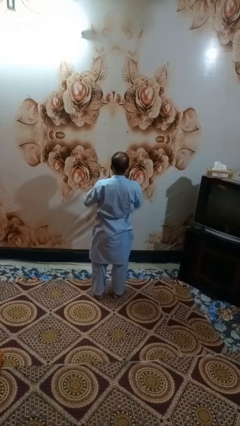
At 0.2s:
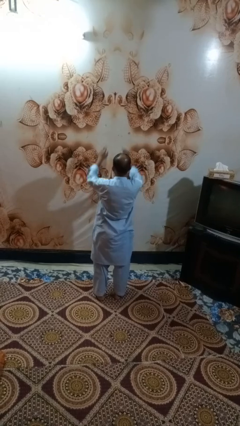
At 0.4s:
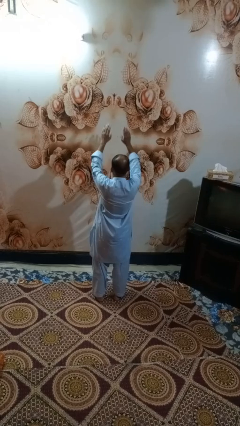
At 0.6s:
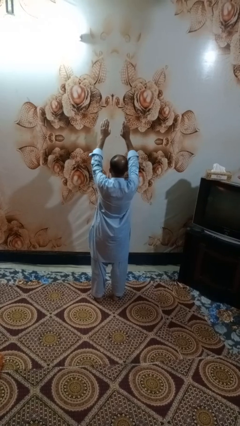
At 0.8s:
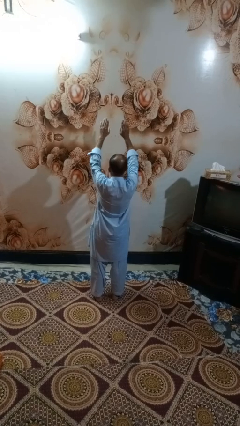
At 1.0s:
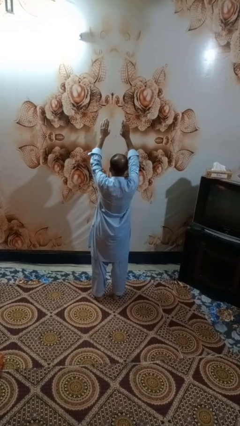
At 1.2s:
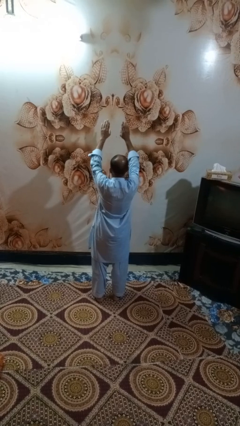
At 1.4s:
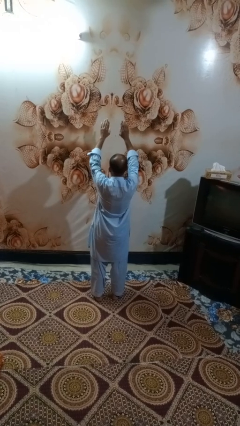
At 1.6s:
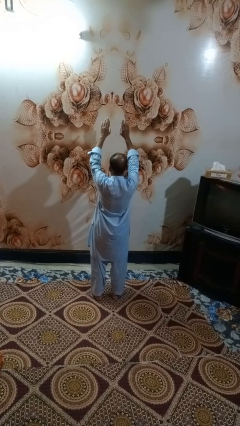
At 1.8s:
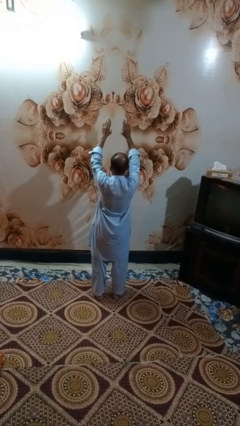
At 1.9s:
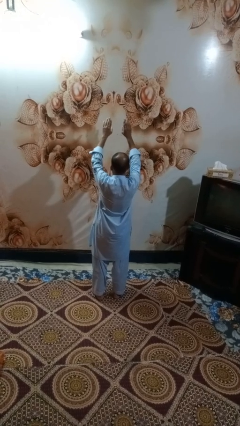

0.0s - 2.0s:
person gestures swipe up

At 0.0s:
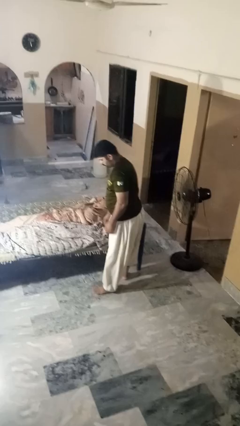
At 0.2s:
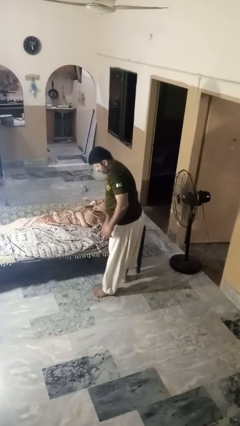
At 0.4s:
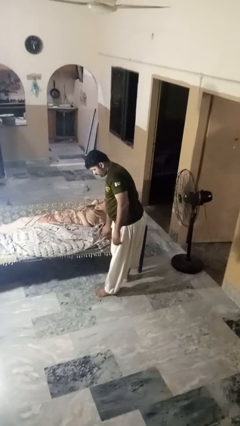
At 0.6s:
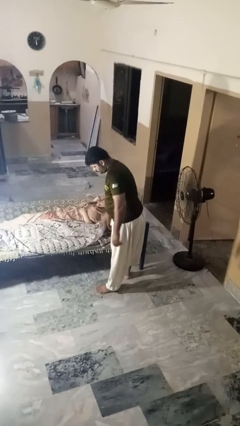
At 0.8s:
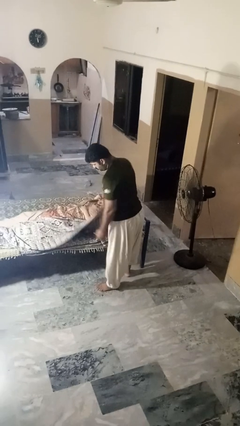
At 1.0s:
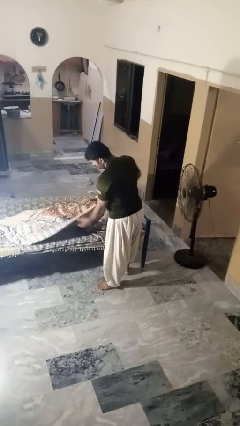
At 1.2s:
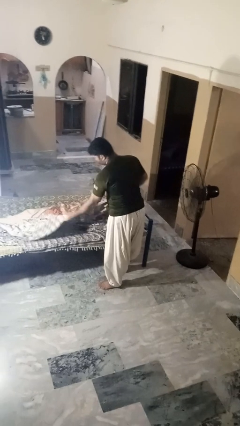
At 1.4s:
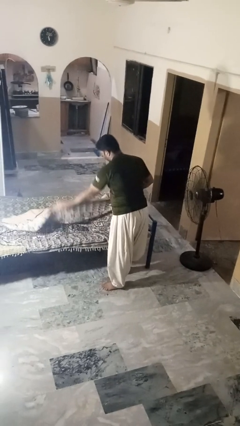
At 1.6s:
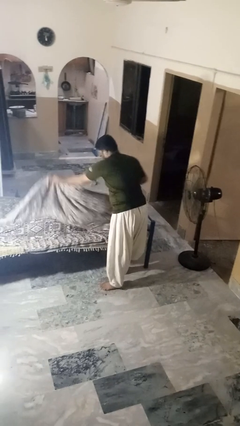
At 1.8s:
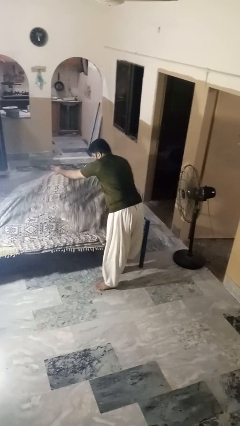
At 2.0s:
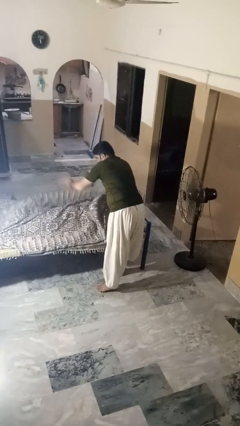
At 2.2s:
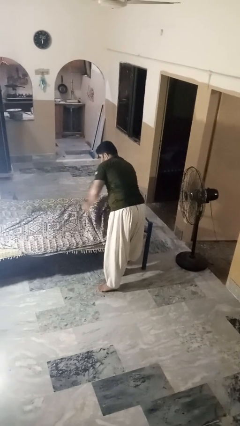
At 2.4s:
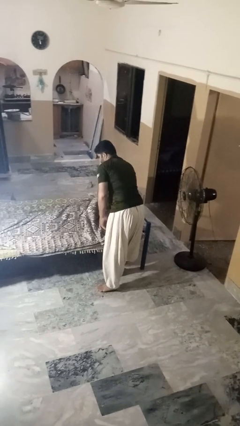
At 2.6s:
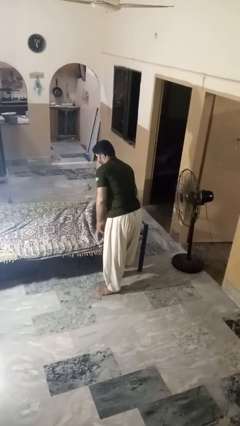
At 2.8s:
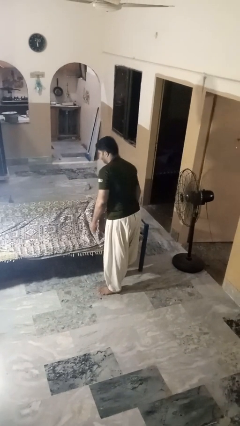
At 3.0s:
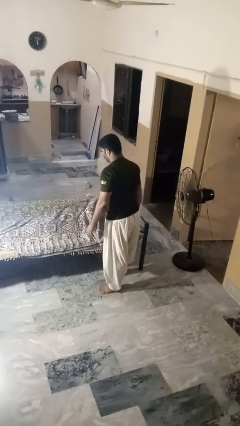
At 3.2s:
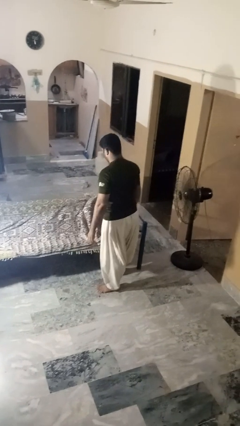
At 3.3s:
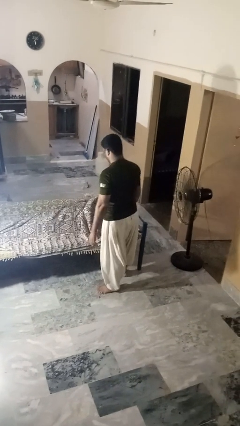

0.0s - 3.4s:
person covers friend with blanket

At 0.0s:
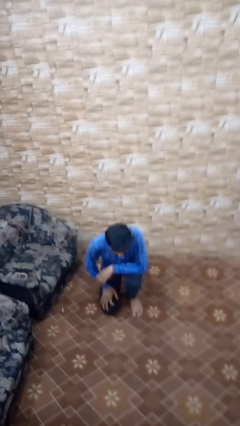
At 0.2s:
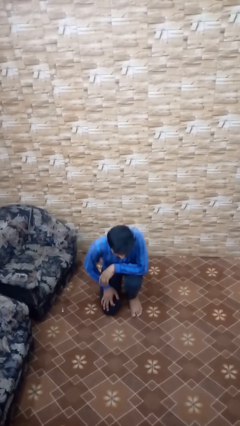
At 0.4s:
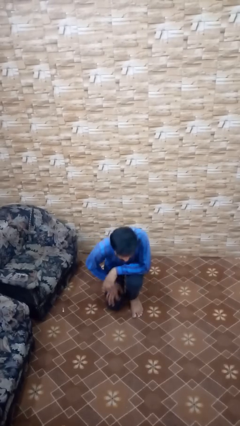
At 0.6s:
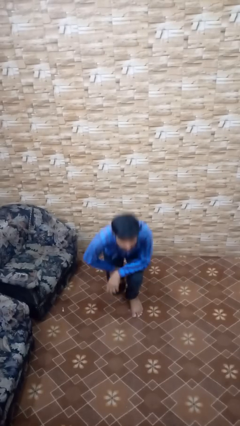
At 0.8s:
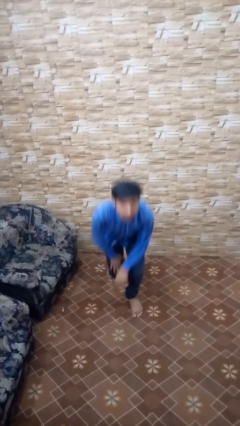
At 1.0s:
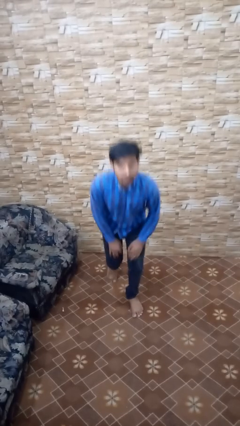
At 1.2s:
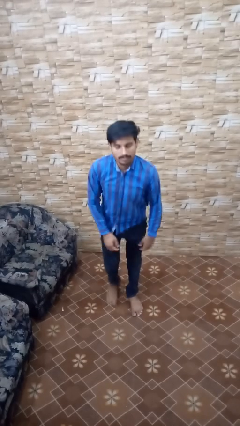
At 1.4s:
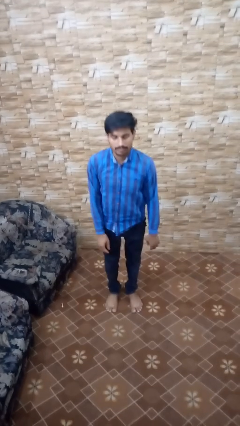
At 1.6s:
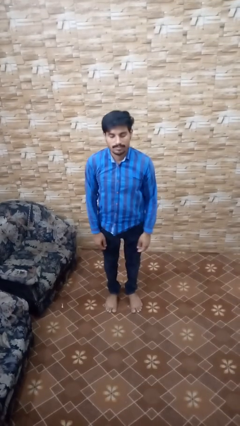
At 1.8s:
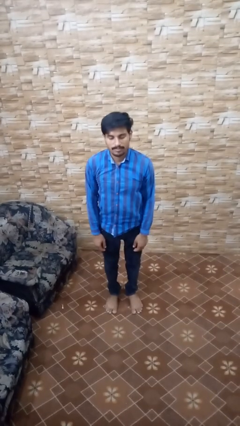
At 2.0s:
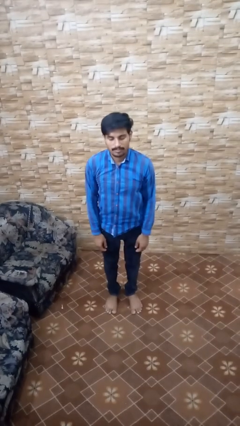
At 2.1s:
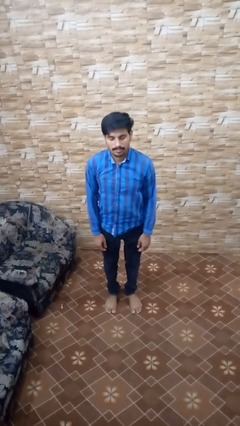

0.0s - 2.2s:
person stands up from floor

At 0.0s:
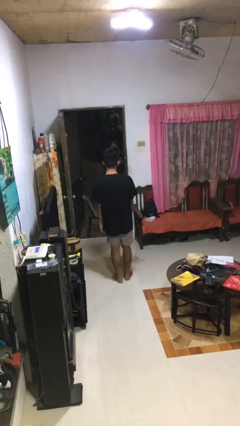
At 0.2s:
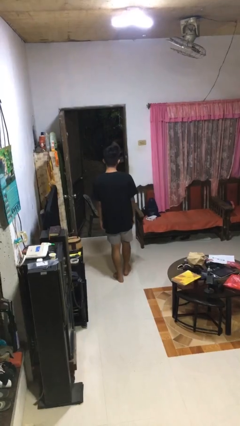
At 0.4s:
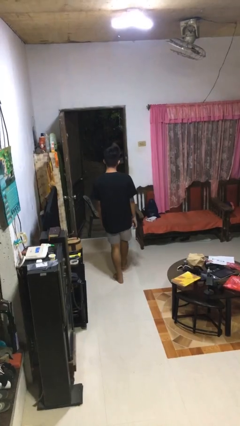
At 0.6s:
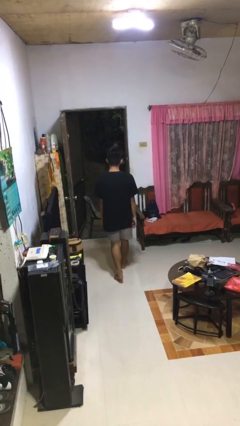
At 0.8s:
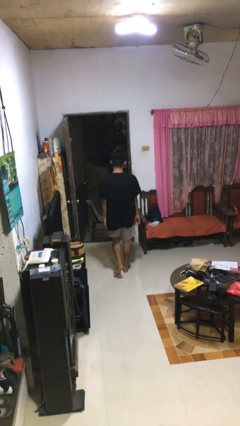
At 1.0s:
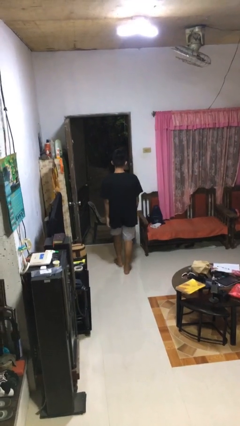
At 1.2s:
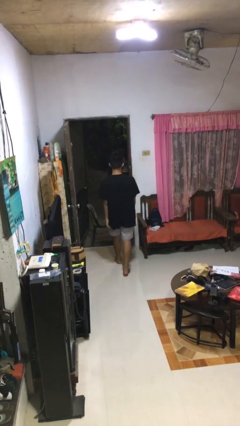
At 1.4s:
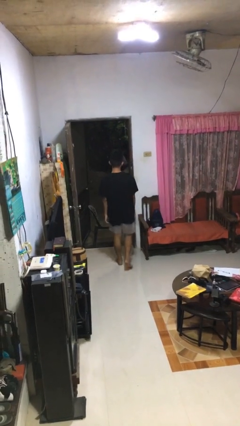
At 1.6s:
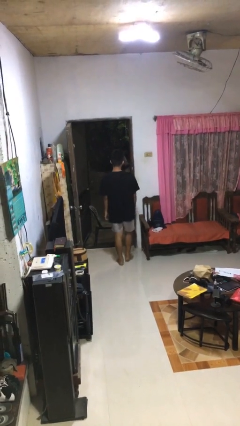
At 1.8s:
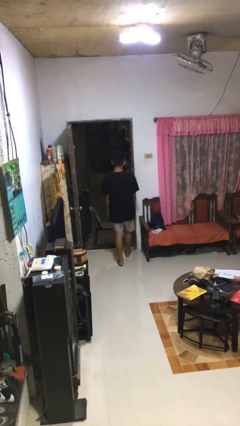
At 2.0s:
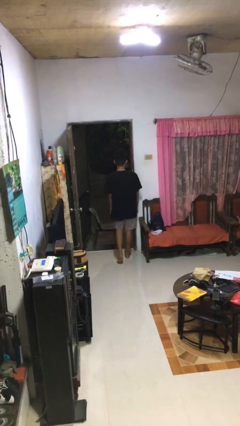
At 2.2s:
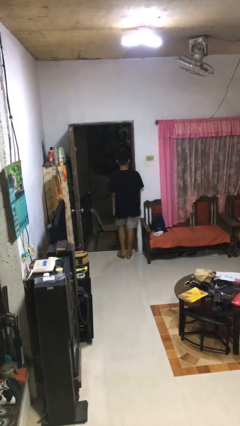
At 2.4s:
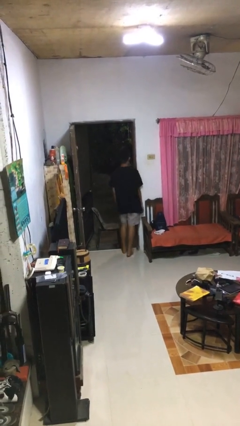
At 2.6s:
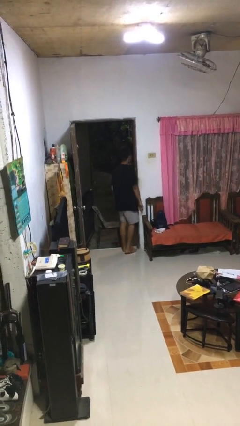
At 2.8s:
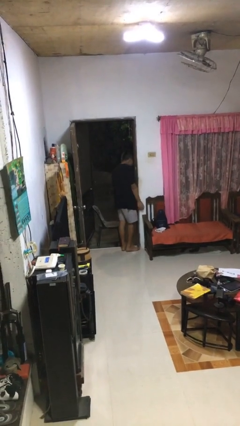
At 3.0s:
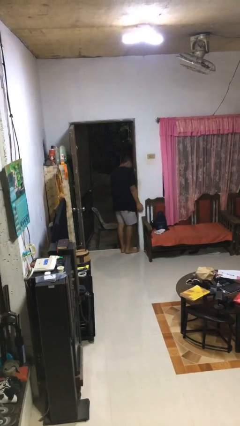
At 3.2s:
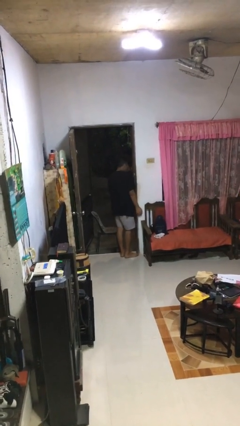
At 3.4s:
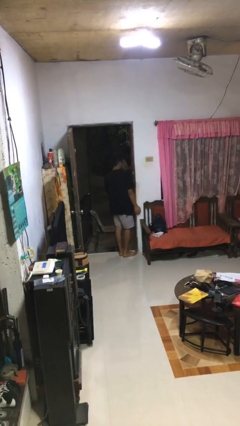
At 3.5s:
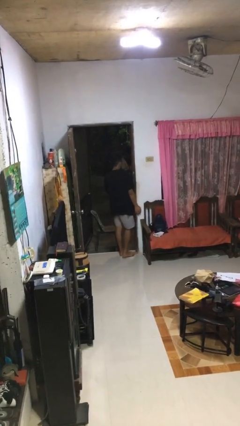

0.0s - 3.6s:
person bumps into wall

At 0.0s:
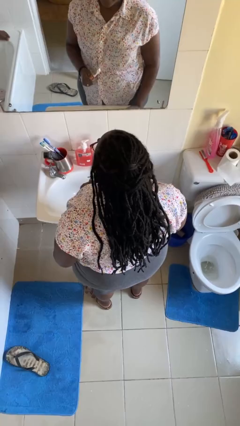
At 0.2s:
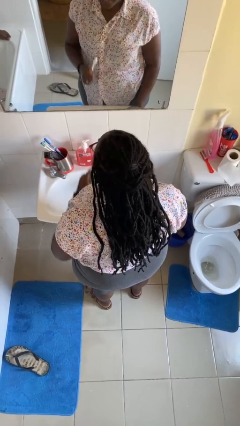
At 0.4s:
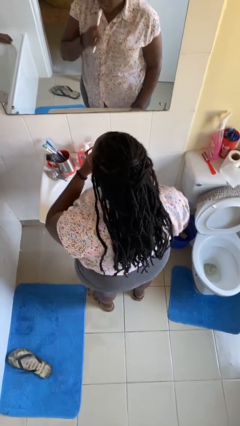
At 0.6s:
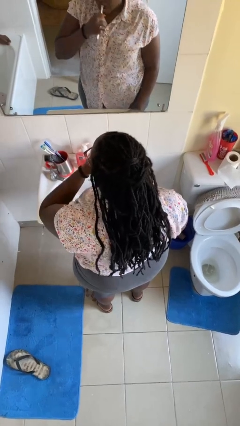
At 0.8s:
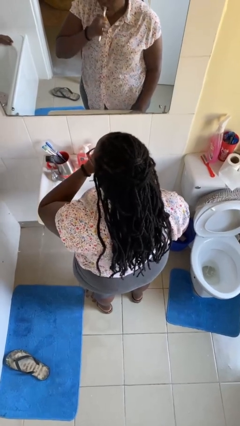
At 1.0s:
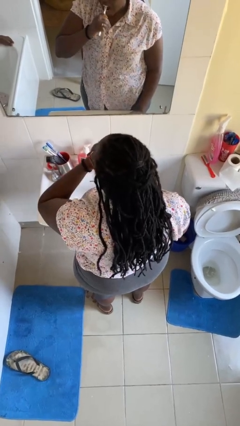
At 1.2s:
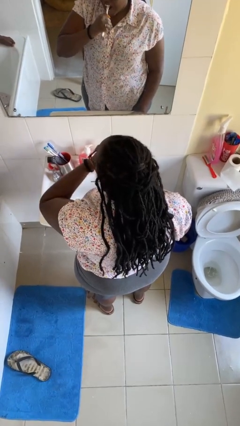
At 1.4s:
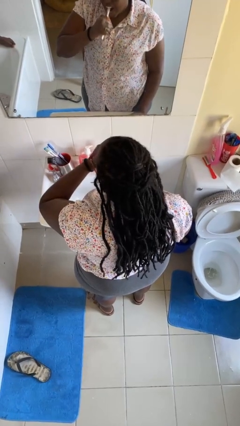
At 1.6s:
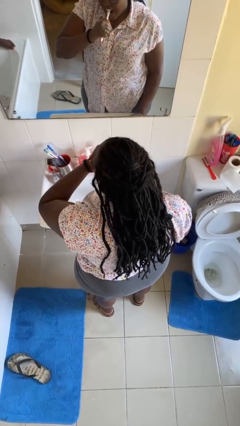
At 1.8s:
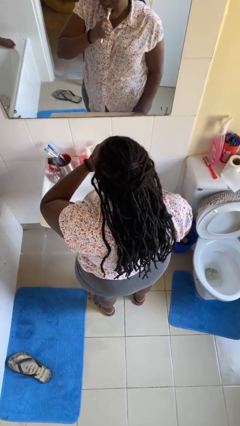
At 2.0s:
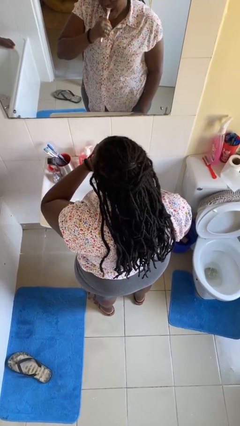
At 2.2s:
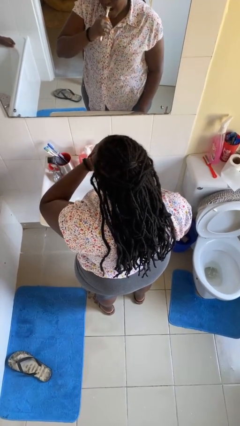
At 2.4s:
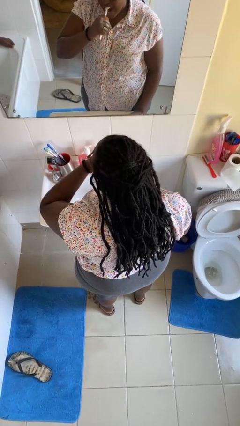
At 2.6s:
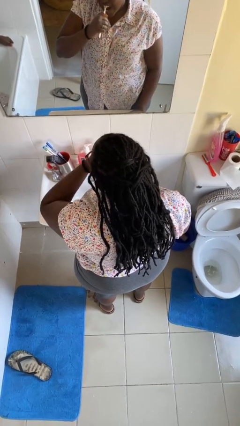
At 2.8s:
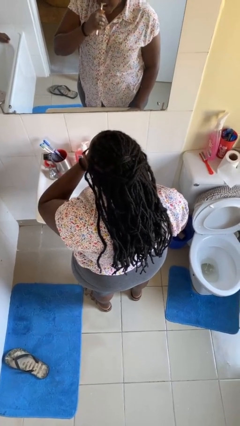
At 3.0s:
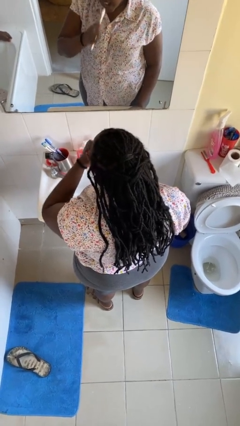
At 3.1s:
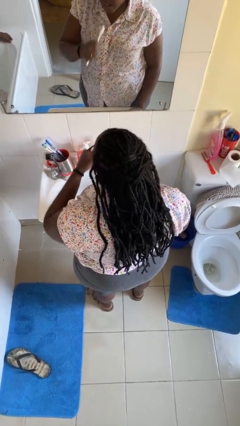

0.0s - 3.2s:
person brushes teeth

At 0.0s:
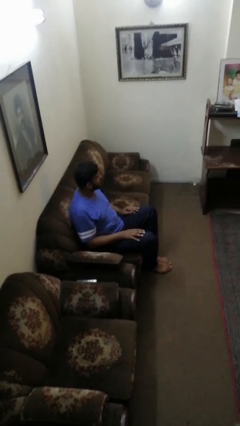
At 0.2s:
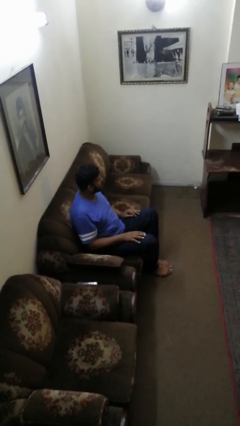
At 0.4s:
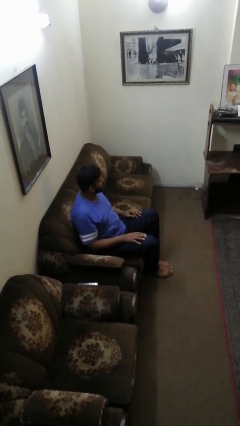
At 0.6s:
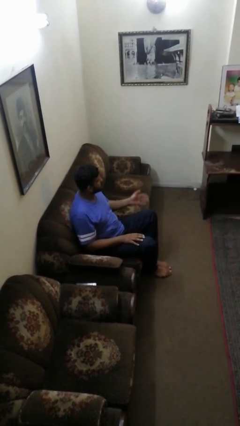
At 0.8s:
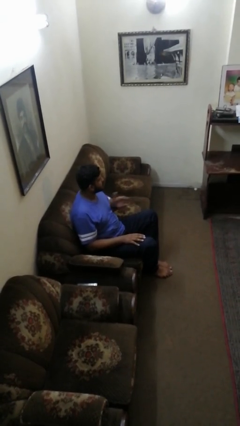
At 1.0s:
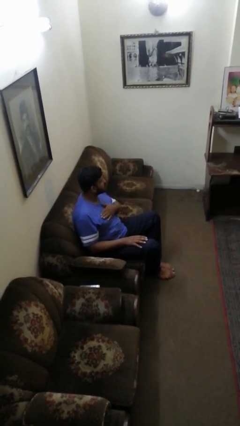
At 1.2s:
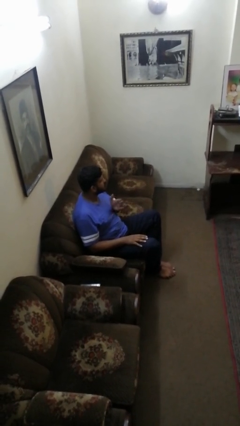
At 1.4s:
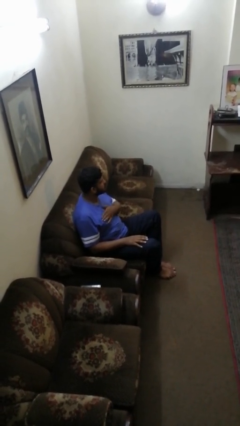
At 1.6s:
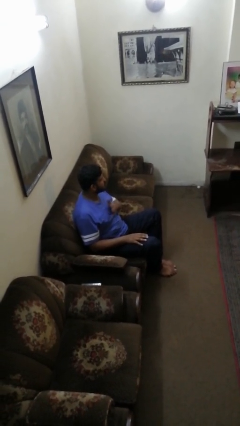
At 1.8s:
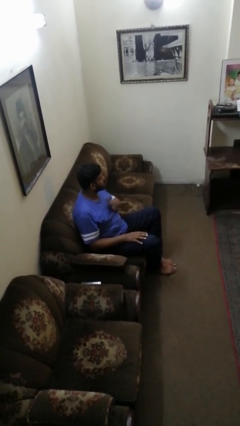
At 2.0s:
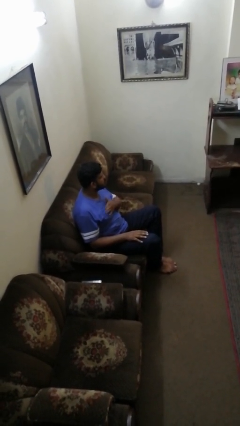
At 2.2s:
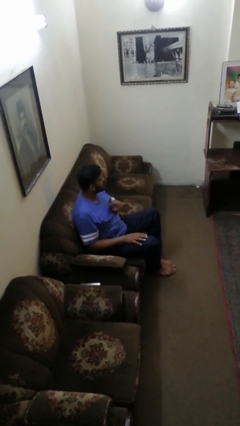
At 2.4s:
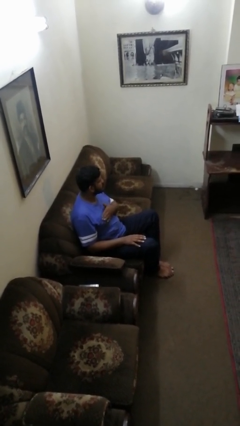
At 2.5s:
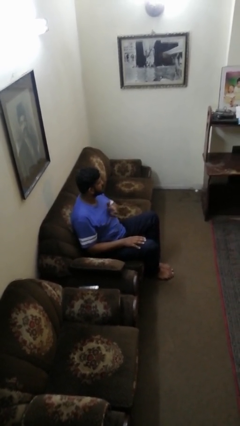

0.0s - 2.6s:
person drums on chest

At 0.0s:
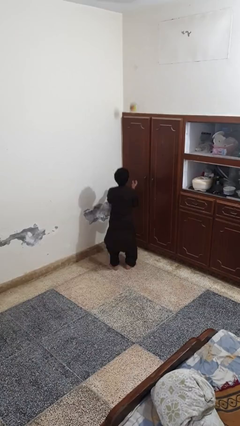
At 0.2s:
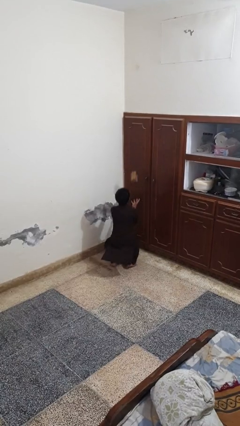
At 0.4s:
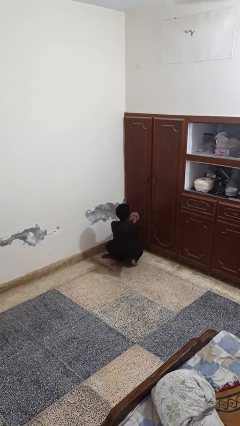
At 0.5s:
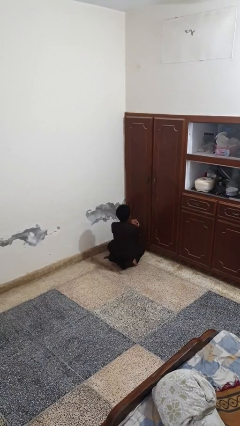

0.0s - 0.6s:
person catches dropped object
